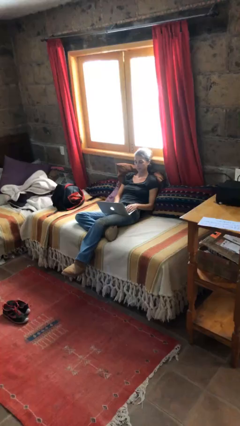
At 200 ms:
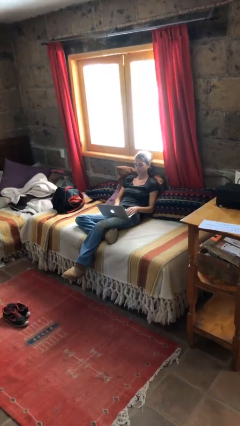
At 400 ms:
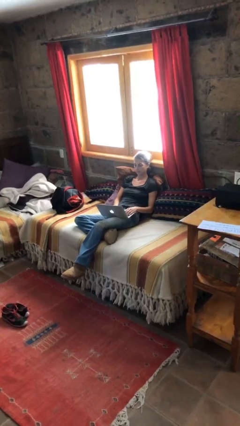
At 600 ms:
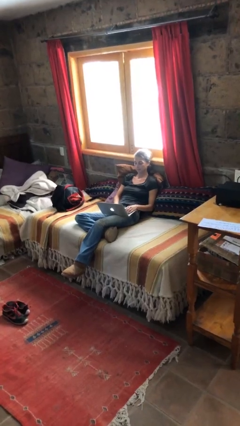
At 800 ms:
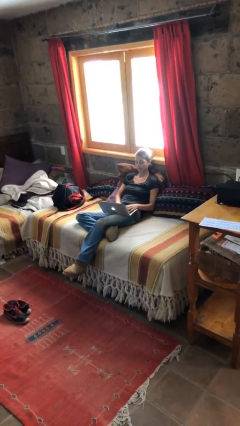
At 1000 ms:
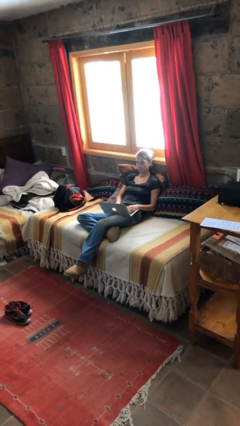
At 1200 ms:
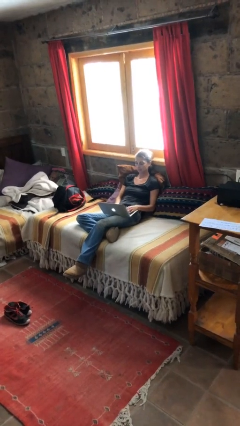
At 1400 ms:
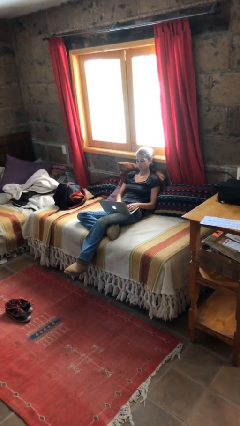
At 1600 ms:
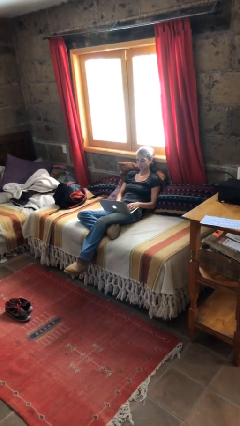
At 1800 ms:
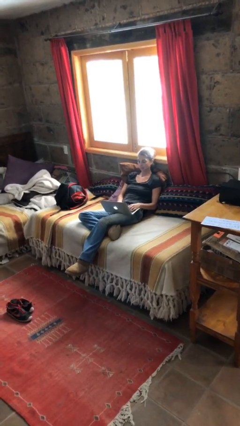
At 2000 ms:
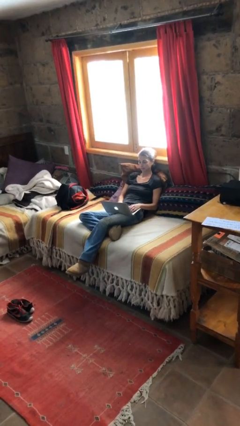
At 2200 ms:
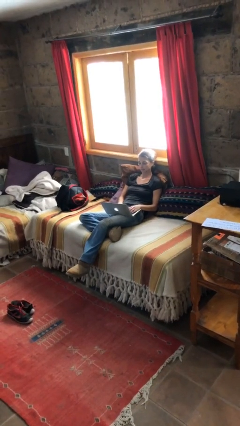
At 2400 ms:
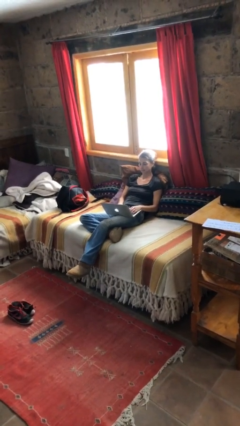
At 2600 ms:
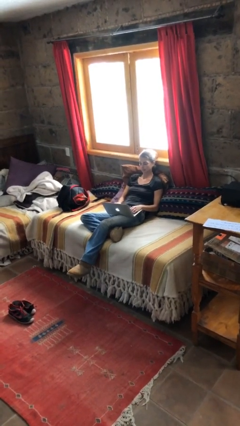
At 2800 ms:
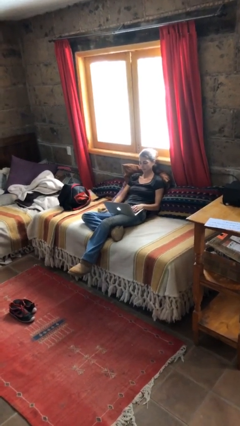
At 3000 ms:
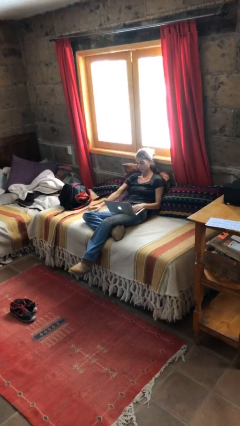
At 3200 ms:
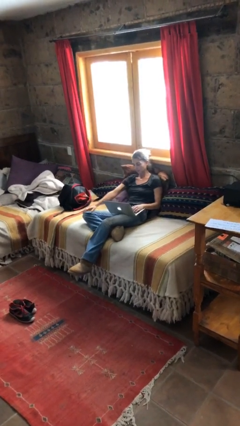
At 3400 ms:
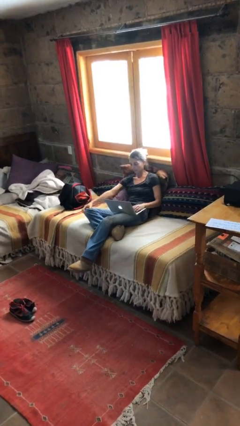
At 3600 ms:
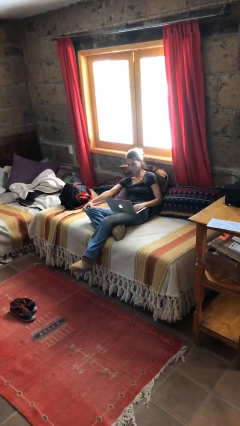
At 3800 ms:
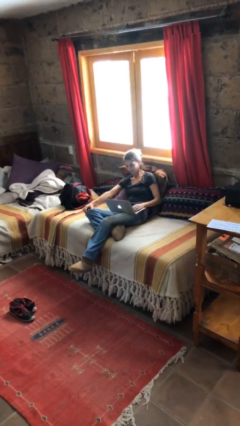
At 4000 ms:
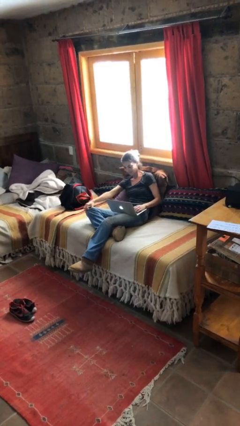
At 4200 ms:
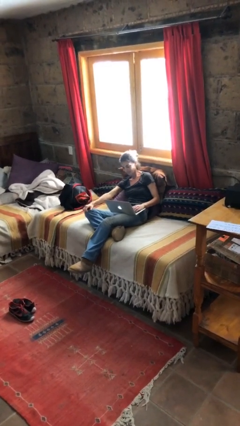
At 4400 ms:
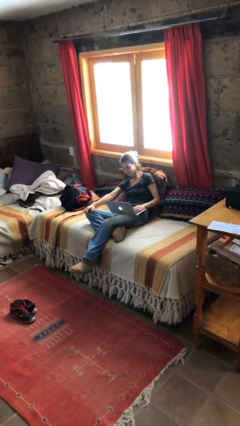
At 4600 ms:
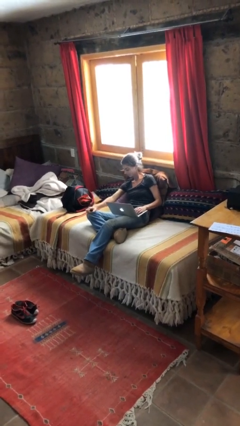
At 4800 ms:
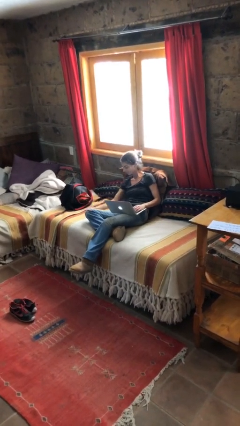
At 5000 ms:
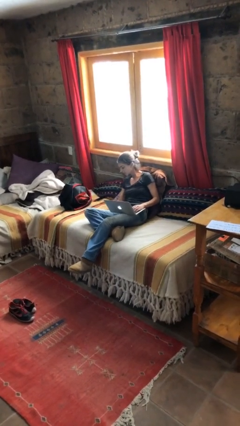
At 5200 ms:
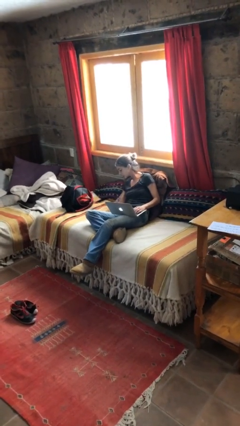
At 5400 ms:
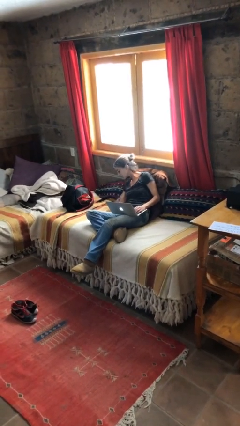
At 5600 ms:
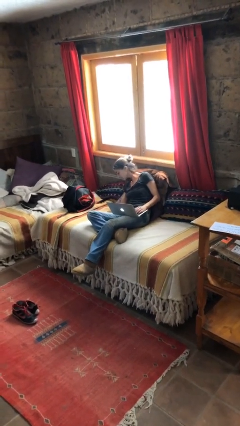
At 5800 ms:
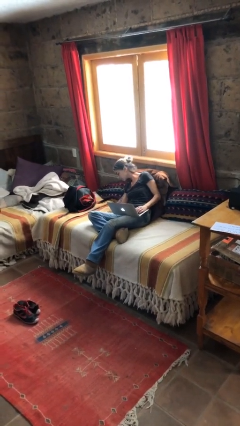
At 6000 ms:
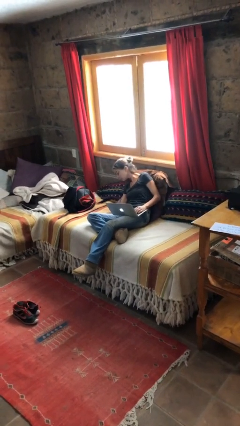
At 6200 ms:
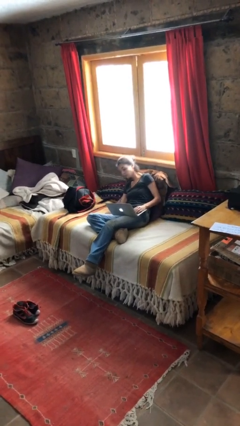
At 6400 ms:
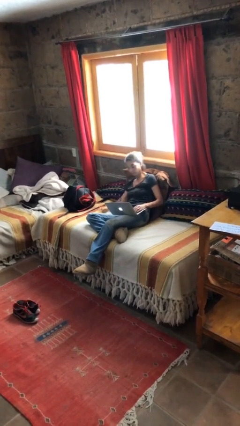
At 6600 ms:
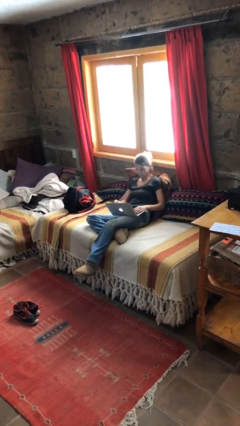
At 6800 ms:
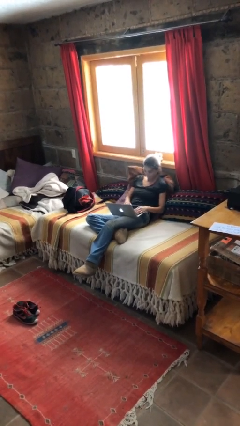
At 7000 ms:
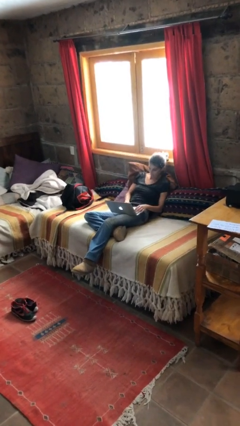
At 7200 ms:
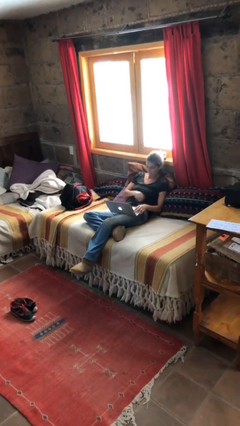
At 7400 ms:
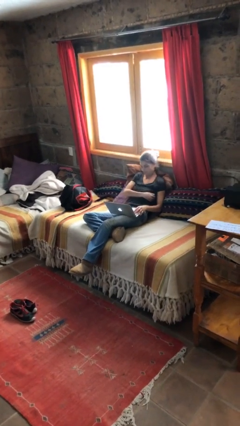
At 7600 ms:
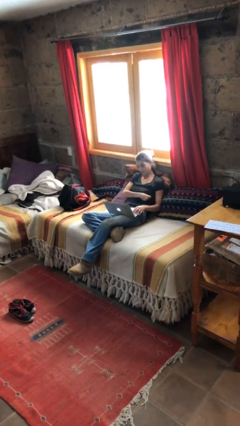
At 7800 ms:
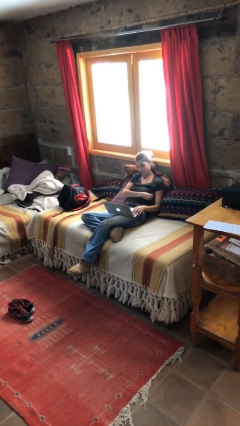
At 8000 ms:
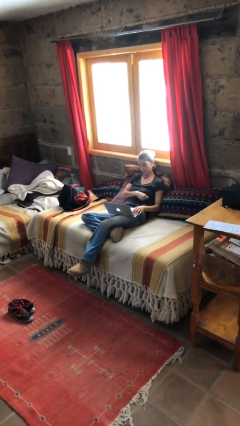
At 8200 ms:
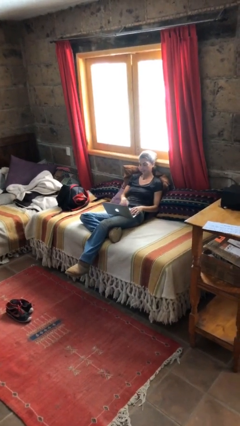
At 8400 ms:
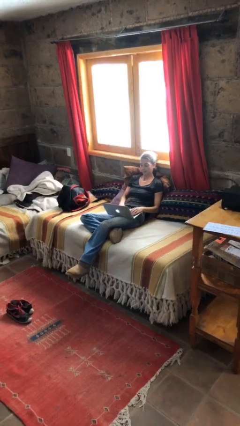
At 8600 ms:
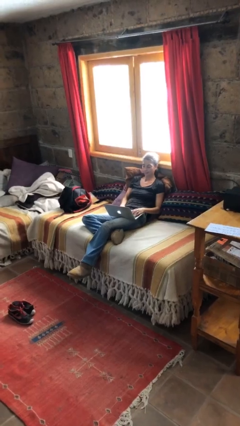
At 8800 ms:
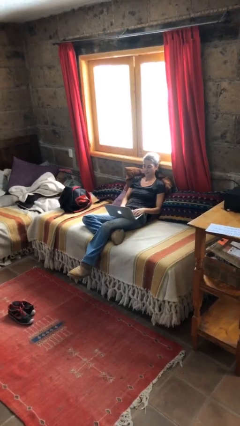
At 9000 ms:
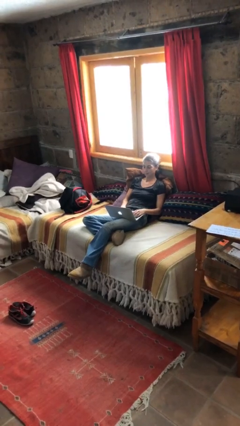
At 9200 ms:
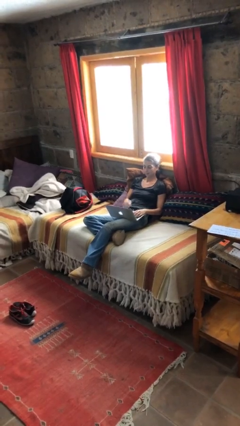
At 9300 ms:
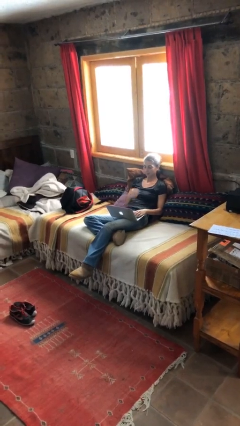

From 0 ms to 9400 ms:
person interacts with laptop

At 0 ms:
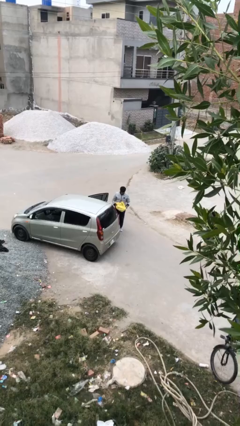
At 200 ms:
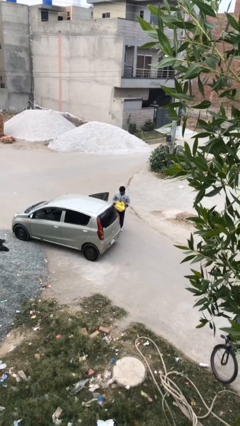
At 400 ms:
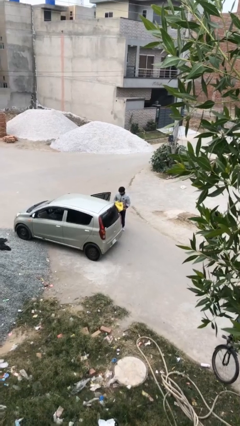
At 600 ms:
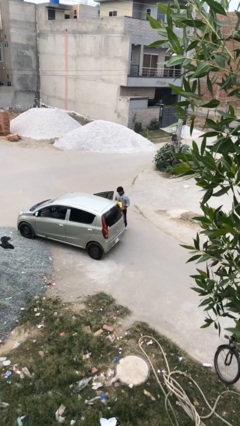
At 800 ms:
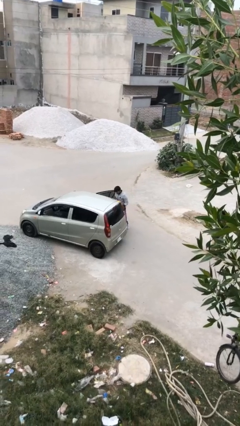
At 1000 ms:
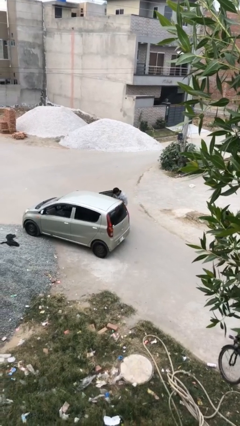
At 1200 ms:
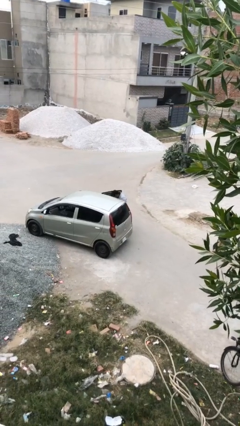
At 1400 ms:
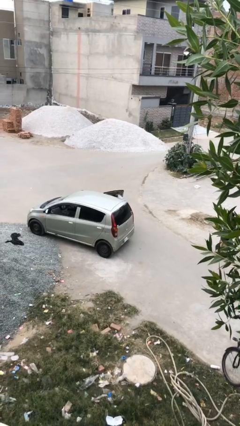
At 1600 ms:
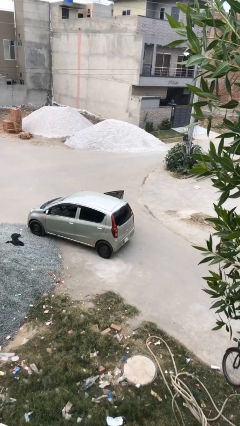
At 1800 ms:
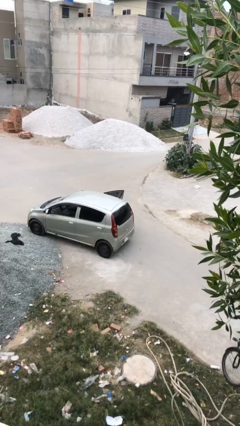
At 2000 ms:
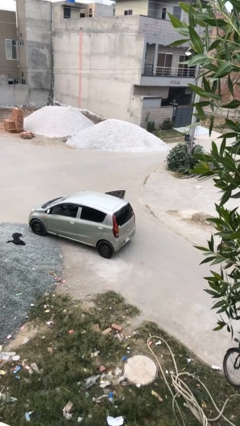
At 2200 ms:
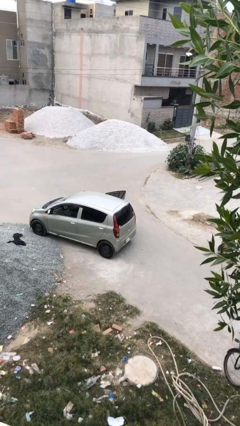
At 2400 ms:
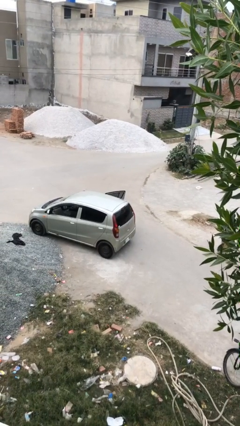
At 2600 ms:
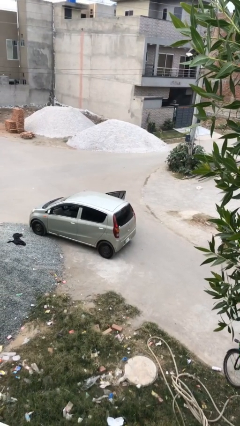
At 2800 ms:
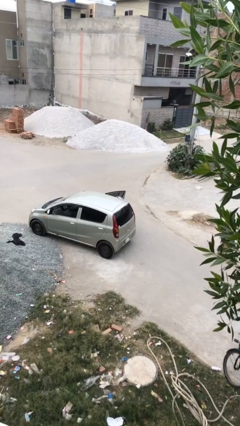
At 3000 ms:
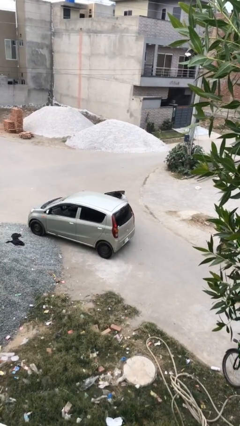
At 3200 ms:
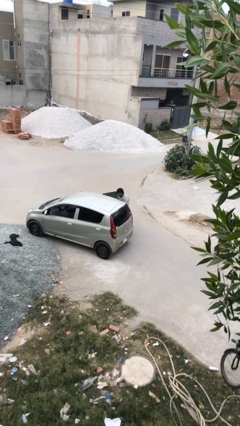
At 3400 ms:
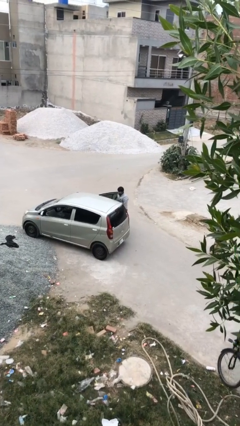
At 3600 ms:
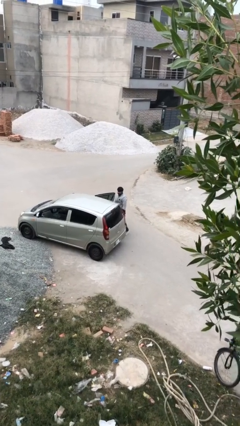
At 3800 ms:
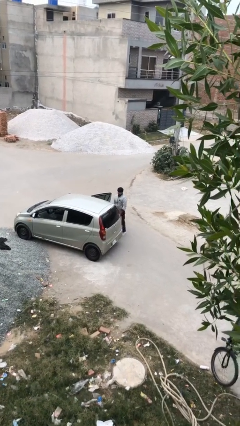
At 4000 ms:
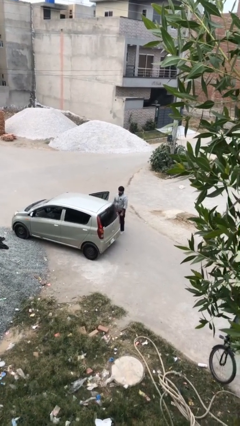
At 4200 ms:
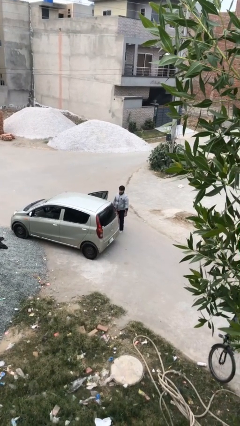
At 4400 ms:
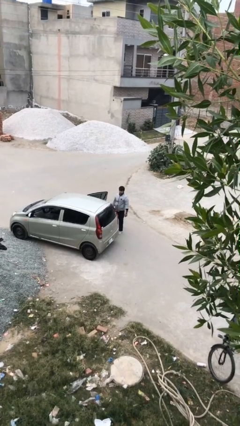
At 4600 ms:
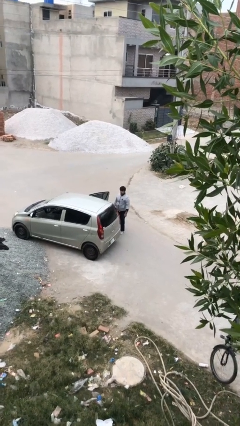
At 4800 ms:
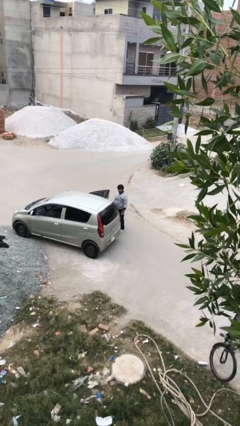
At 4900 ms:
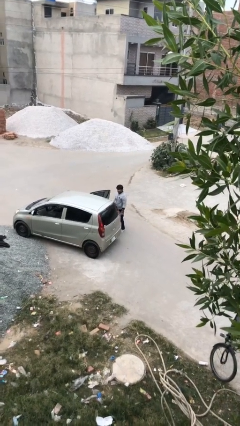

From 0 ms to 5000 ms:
person loads car

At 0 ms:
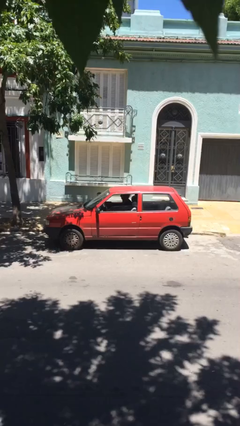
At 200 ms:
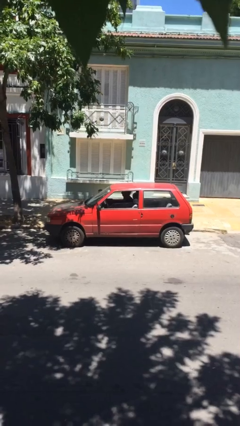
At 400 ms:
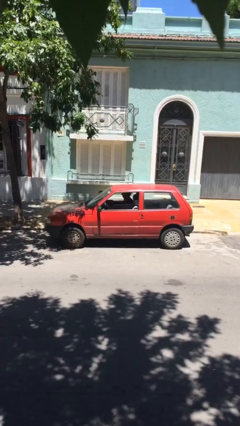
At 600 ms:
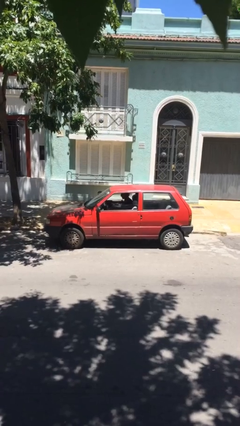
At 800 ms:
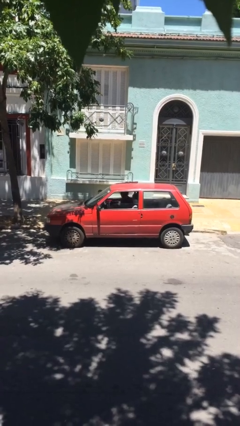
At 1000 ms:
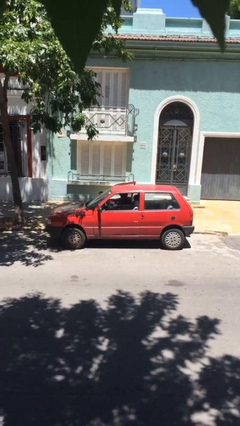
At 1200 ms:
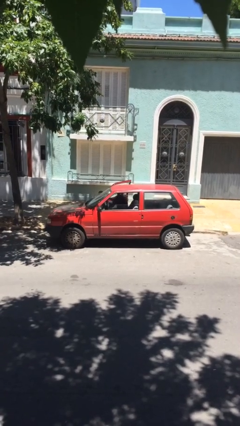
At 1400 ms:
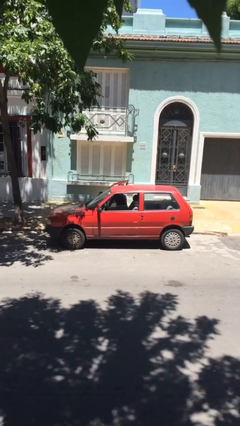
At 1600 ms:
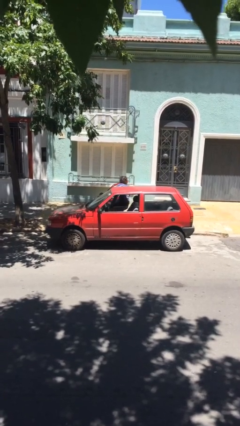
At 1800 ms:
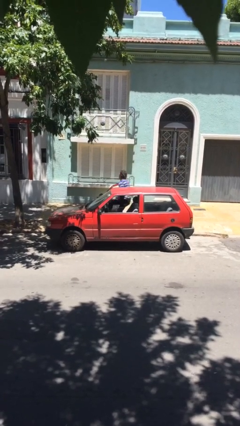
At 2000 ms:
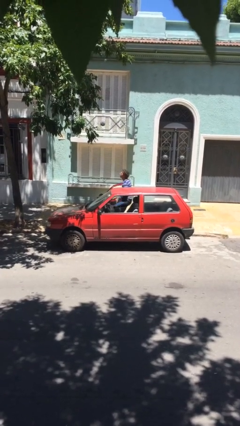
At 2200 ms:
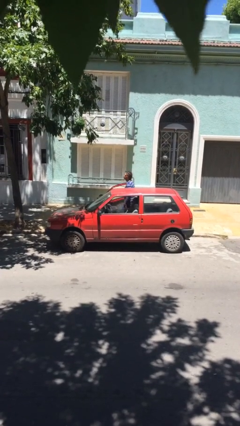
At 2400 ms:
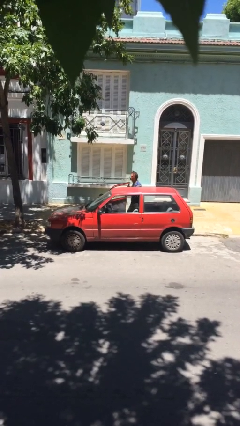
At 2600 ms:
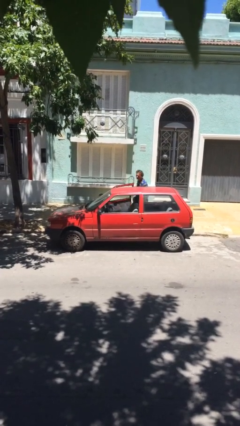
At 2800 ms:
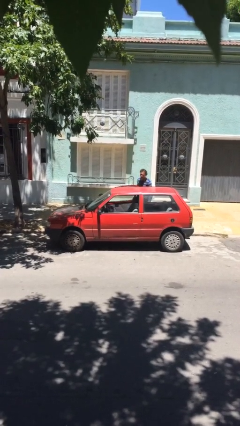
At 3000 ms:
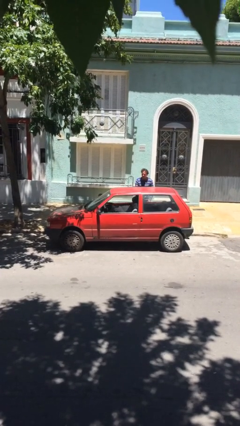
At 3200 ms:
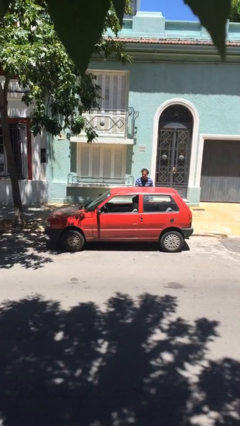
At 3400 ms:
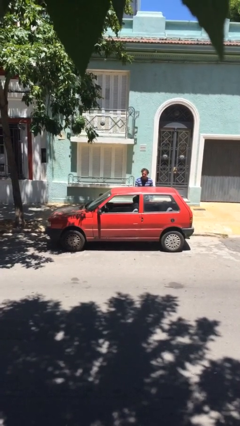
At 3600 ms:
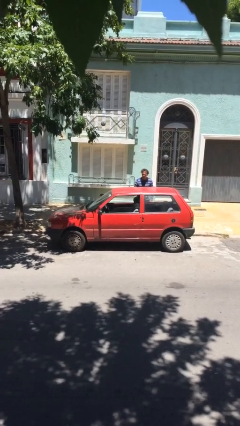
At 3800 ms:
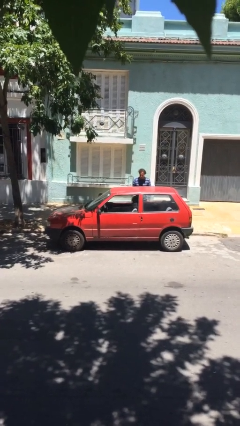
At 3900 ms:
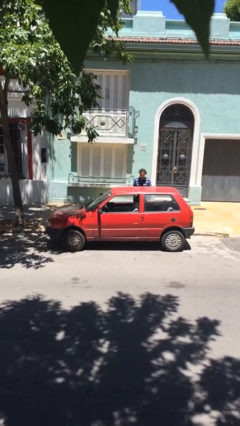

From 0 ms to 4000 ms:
car drops off person
